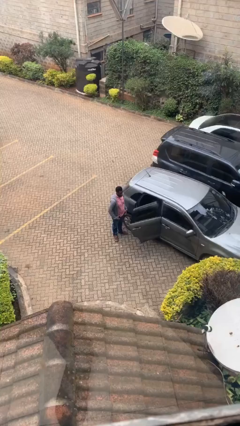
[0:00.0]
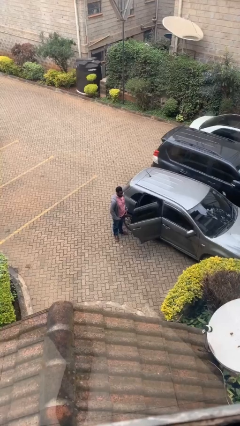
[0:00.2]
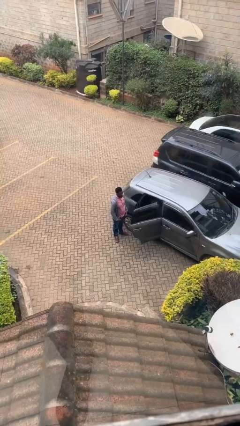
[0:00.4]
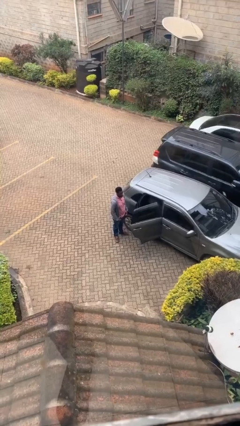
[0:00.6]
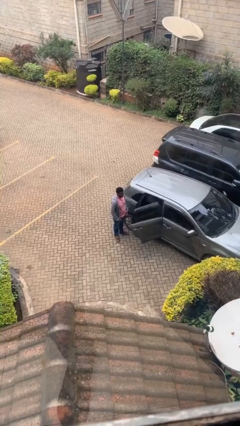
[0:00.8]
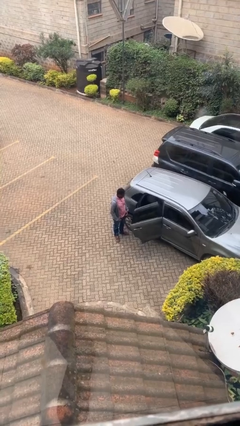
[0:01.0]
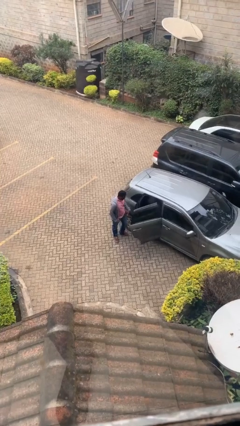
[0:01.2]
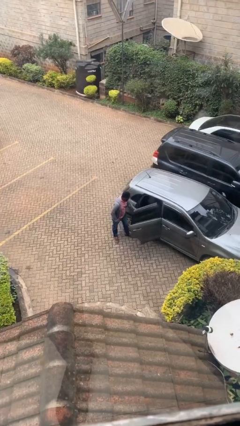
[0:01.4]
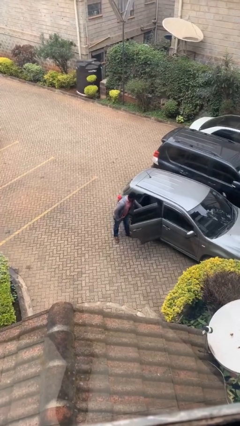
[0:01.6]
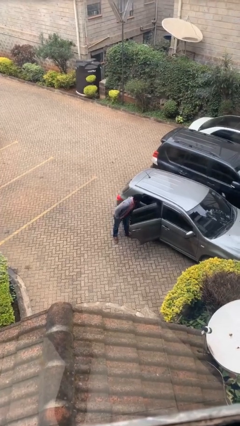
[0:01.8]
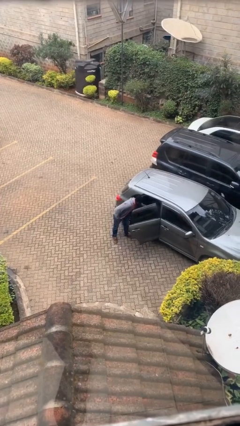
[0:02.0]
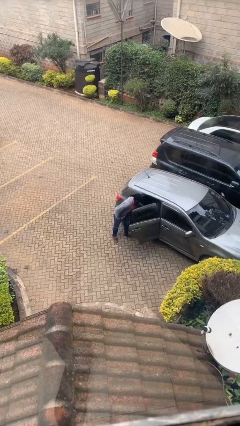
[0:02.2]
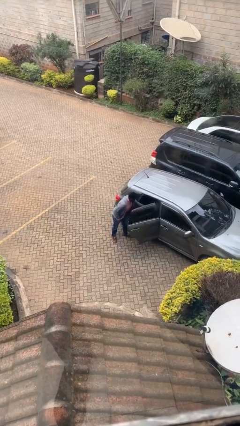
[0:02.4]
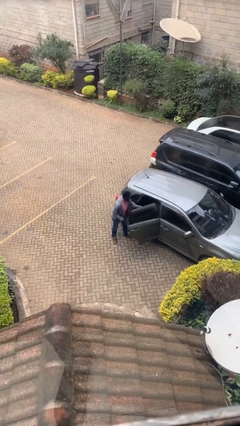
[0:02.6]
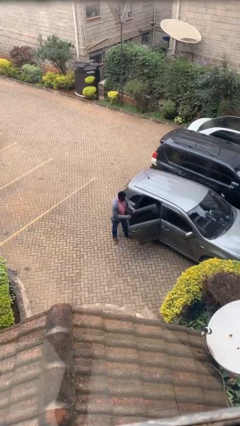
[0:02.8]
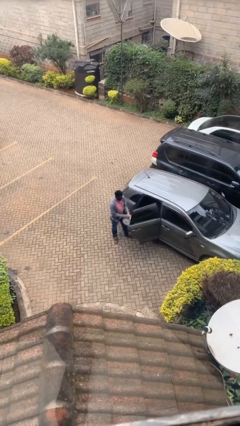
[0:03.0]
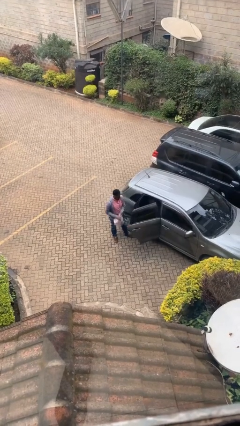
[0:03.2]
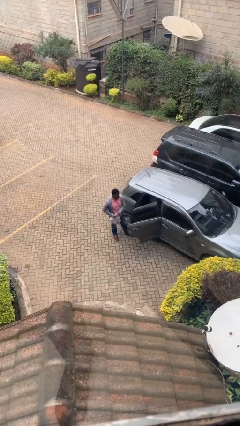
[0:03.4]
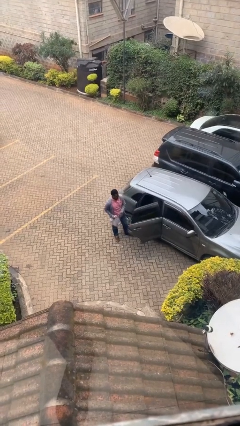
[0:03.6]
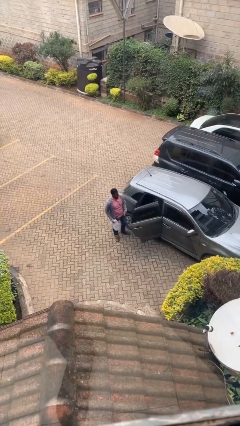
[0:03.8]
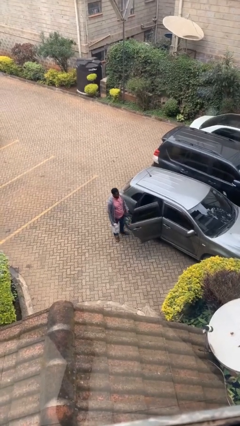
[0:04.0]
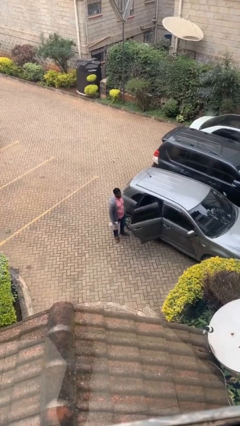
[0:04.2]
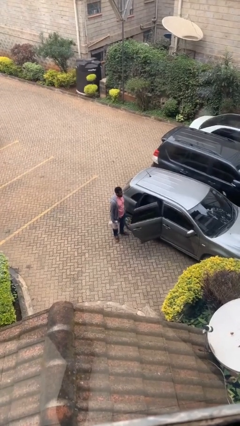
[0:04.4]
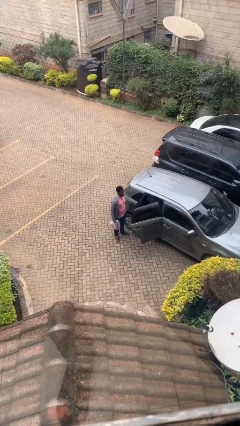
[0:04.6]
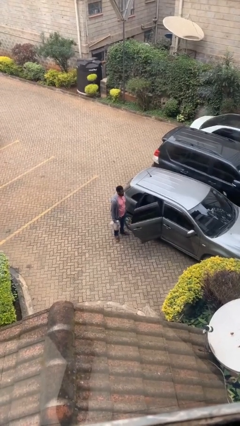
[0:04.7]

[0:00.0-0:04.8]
person unloads car

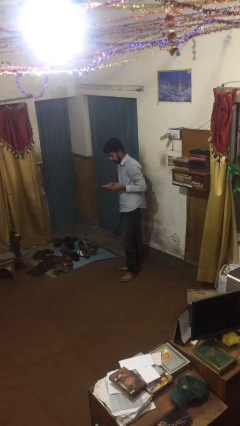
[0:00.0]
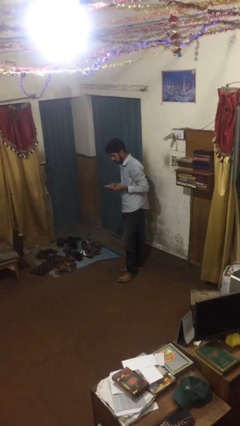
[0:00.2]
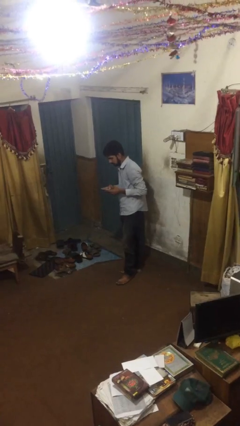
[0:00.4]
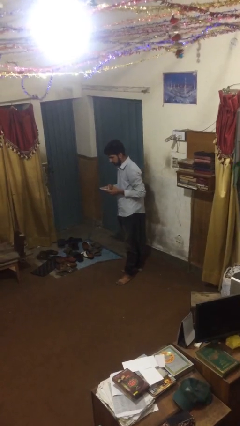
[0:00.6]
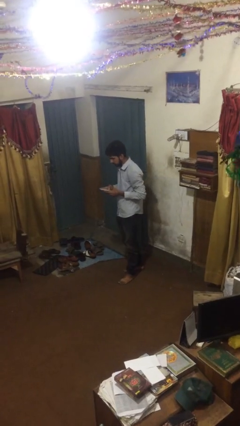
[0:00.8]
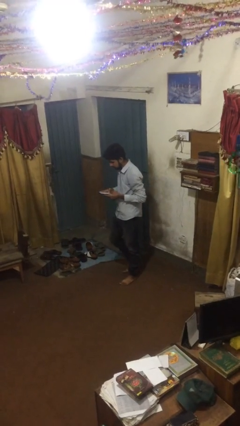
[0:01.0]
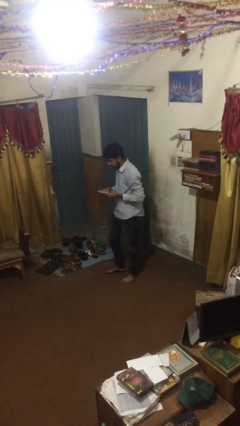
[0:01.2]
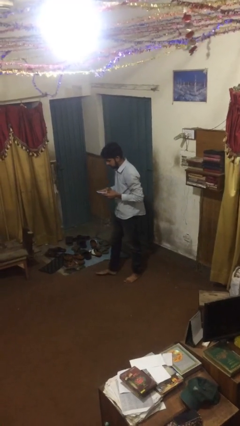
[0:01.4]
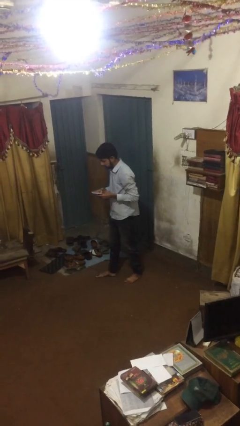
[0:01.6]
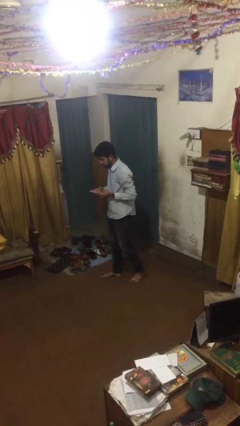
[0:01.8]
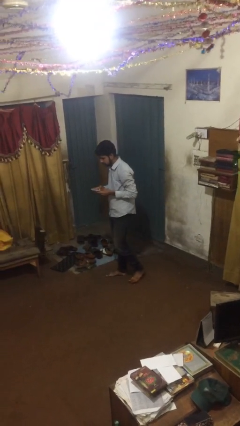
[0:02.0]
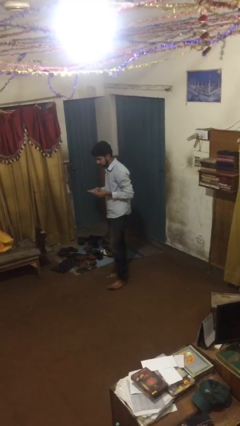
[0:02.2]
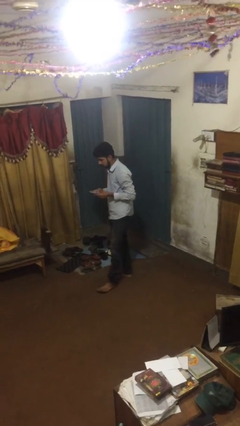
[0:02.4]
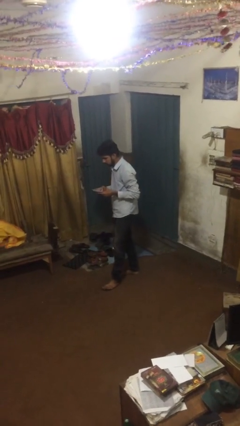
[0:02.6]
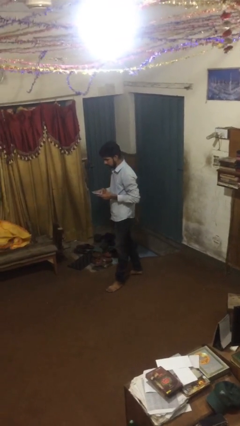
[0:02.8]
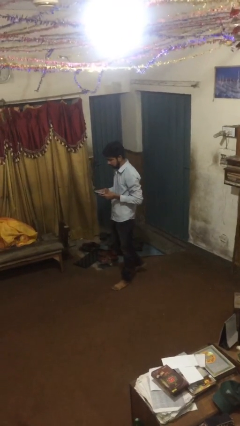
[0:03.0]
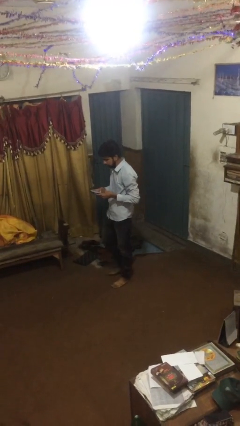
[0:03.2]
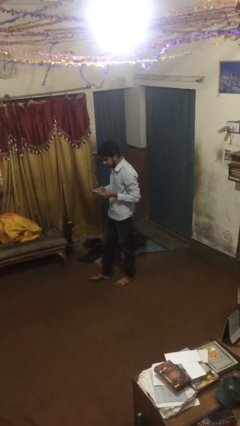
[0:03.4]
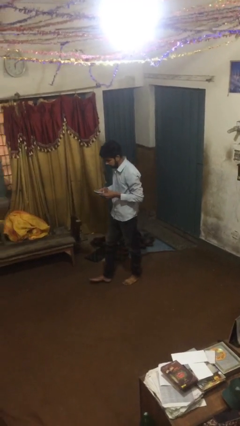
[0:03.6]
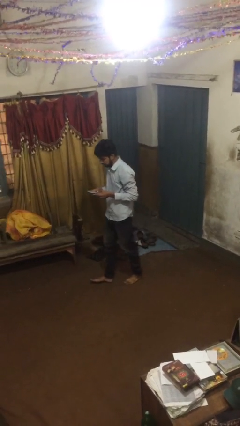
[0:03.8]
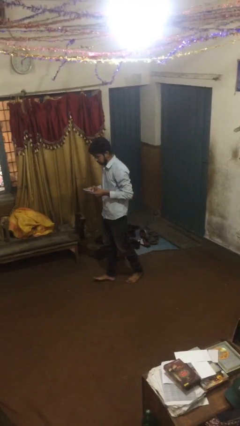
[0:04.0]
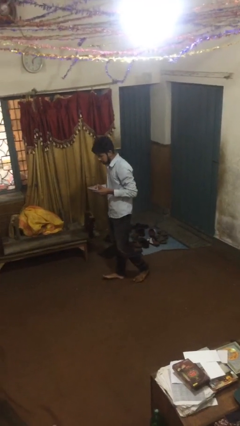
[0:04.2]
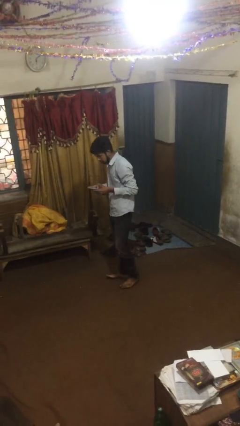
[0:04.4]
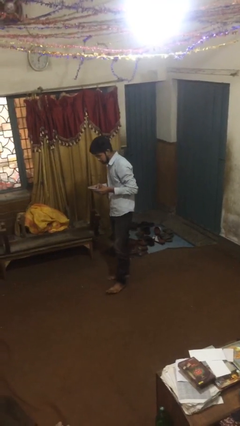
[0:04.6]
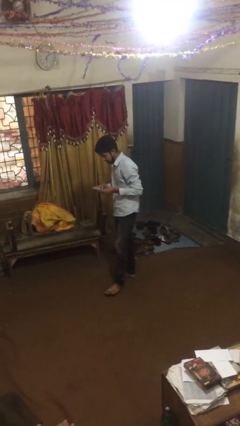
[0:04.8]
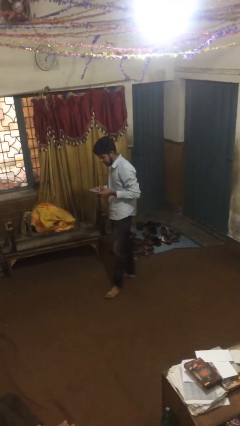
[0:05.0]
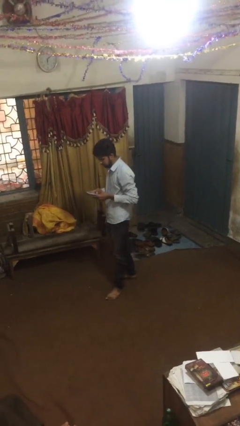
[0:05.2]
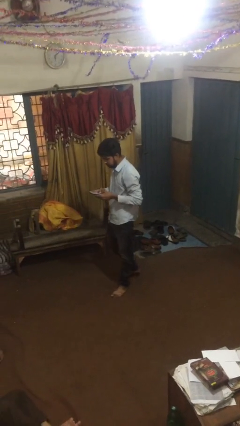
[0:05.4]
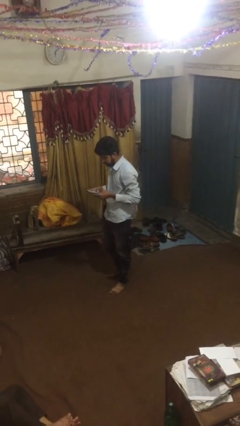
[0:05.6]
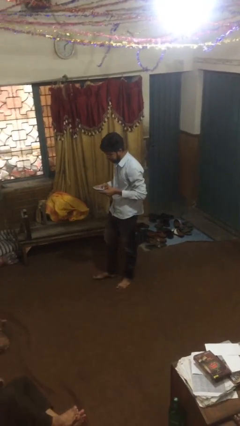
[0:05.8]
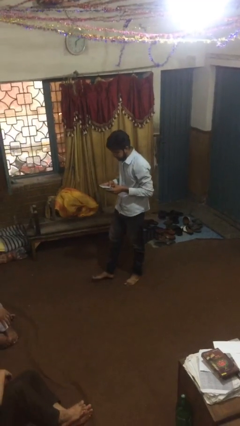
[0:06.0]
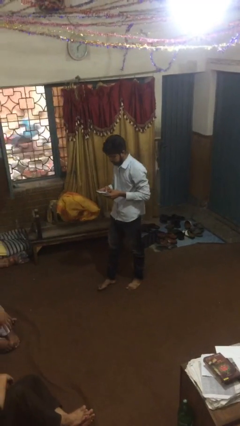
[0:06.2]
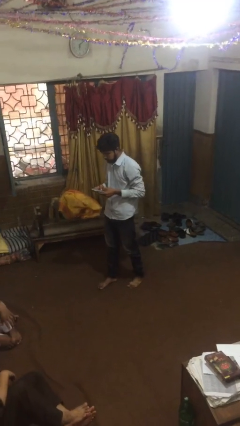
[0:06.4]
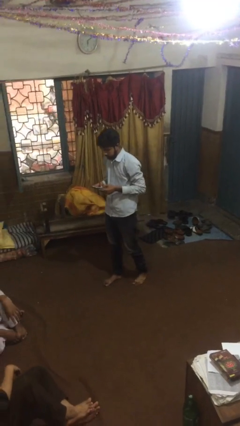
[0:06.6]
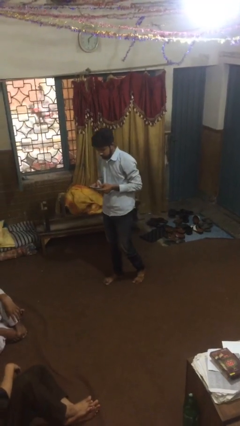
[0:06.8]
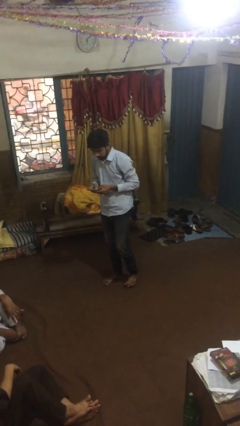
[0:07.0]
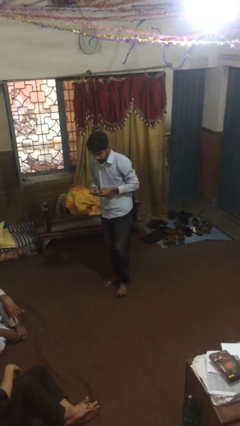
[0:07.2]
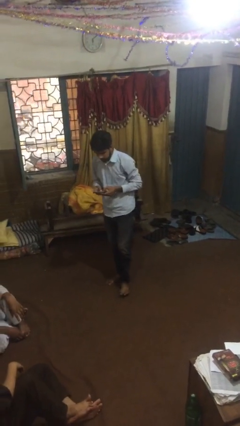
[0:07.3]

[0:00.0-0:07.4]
person texts on phone

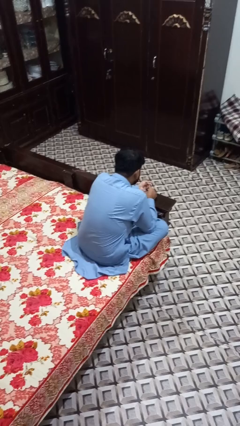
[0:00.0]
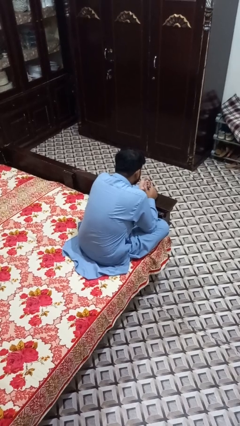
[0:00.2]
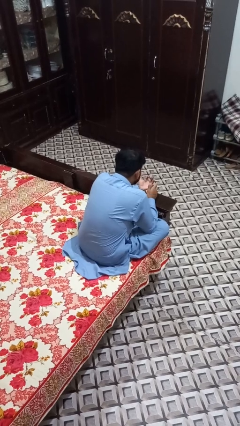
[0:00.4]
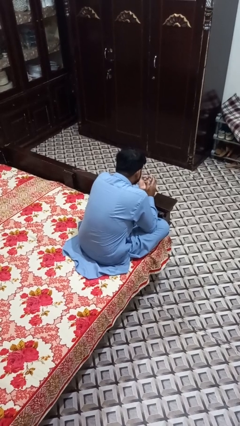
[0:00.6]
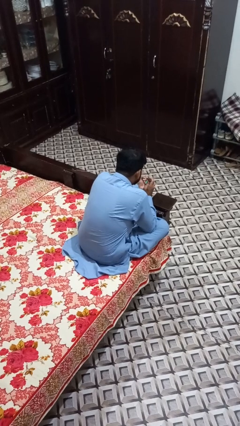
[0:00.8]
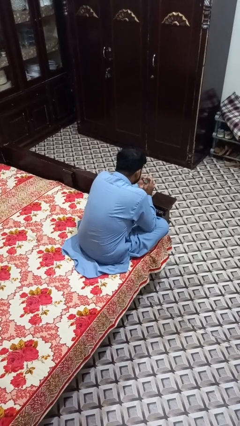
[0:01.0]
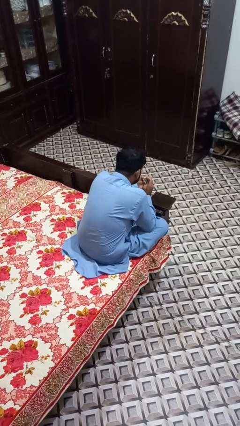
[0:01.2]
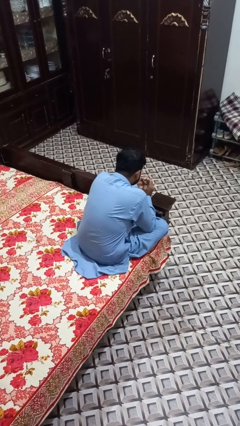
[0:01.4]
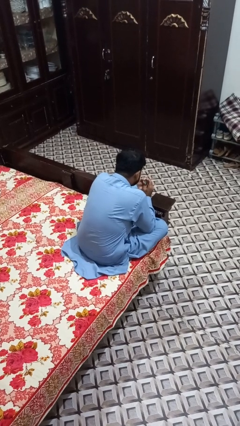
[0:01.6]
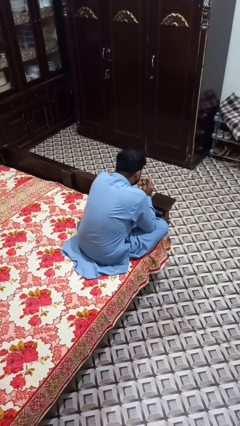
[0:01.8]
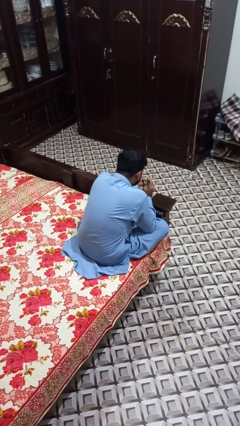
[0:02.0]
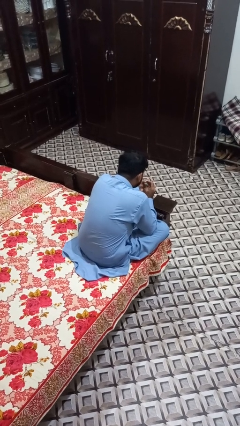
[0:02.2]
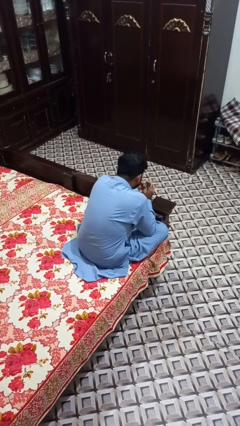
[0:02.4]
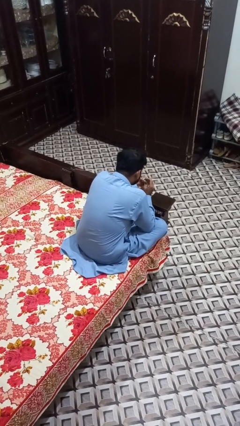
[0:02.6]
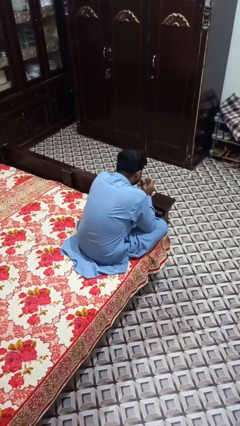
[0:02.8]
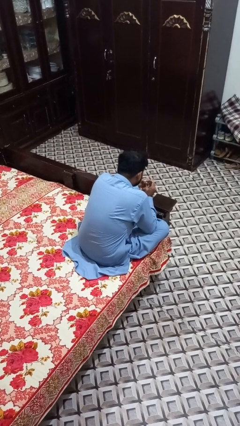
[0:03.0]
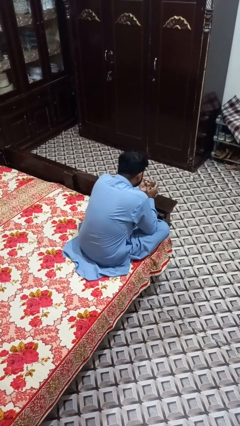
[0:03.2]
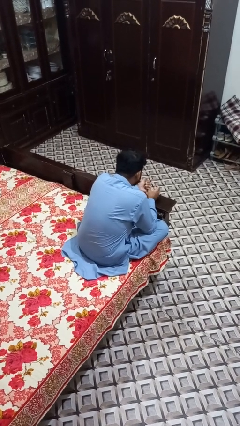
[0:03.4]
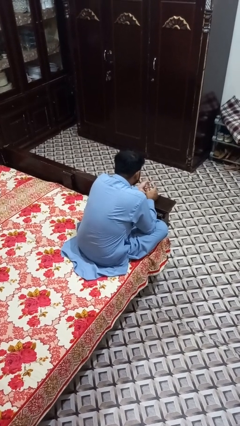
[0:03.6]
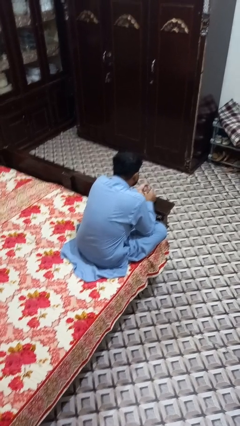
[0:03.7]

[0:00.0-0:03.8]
person clips fingernails

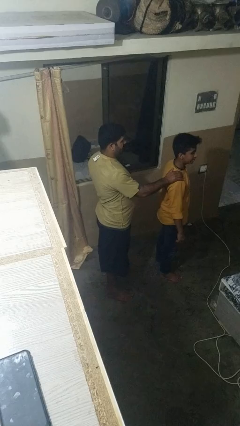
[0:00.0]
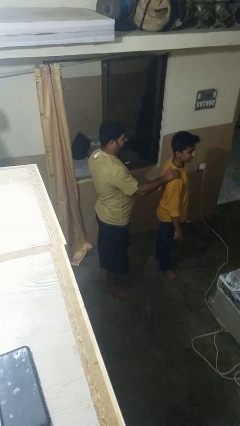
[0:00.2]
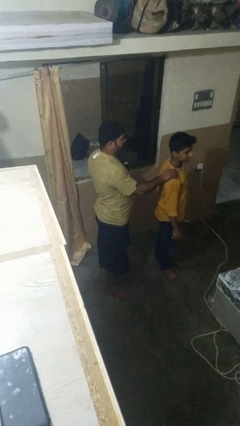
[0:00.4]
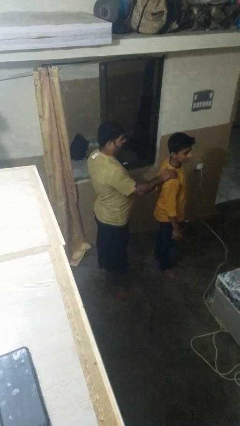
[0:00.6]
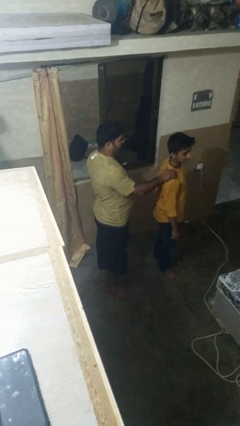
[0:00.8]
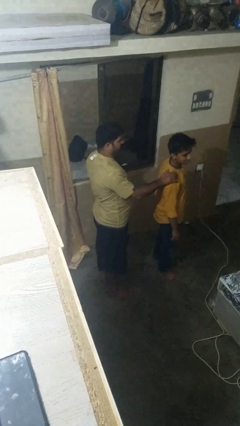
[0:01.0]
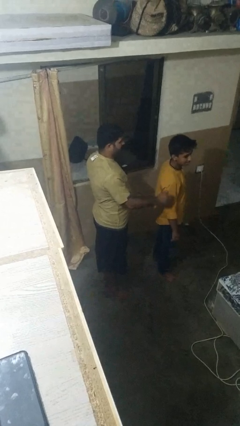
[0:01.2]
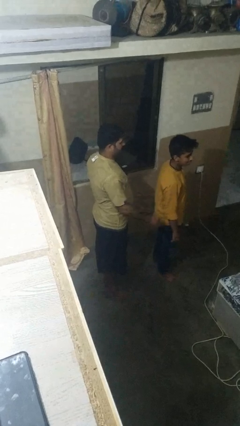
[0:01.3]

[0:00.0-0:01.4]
person waves at person
